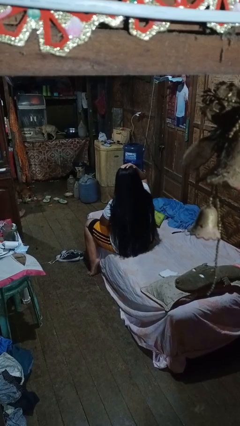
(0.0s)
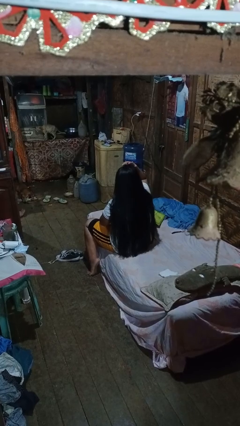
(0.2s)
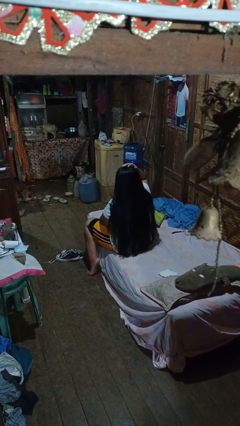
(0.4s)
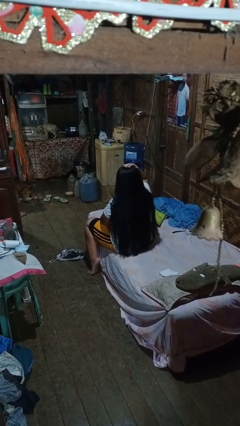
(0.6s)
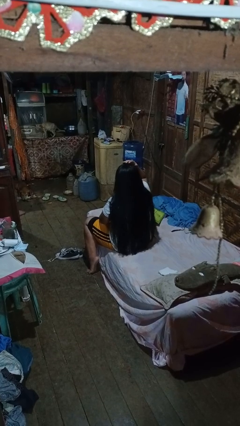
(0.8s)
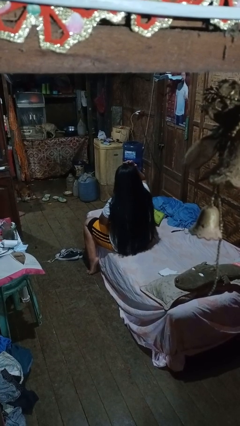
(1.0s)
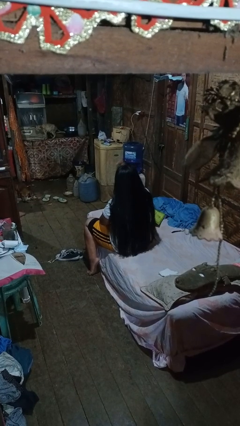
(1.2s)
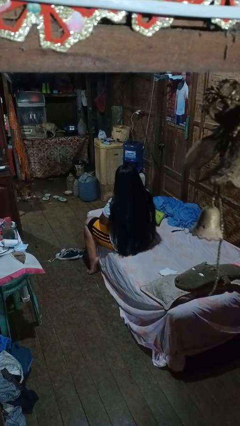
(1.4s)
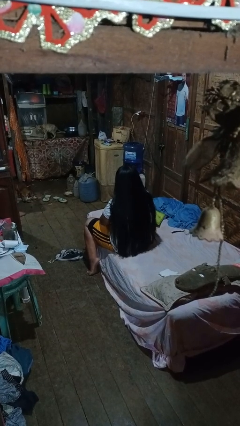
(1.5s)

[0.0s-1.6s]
person pats head

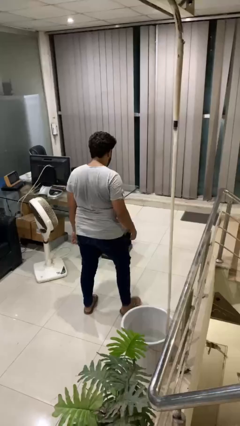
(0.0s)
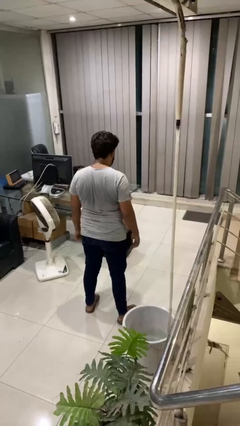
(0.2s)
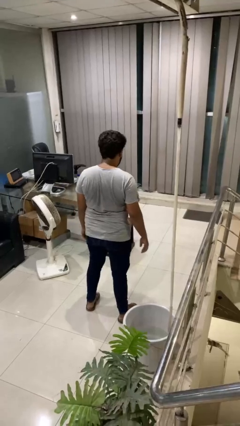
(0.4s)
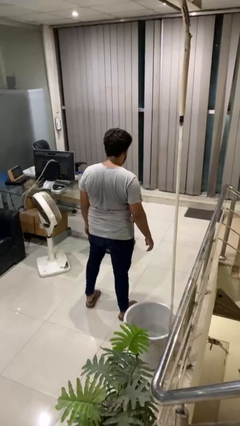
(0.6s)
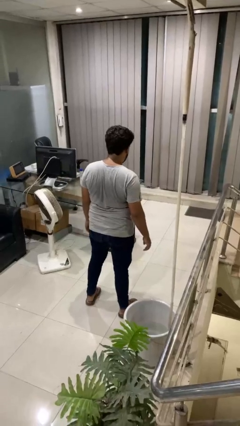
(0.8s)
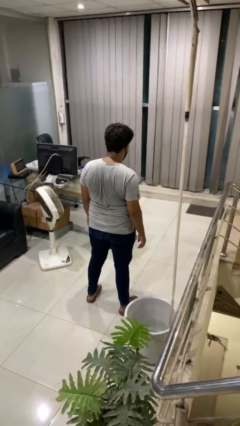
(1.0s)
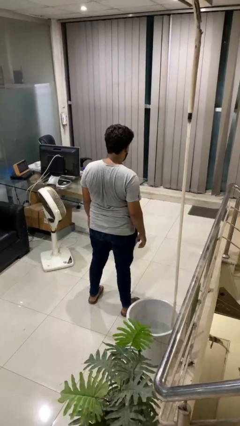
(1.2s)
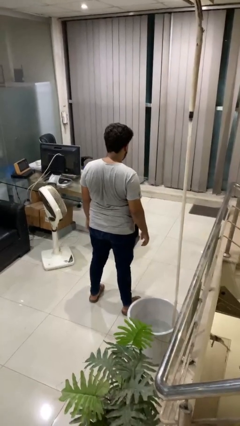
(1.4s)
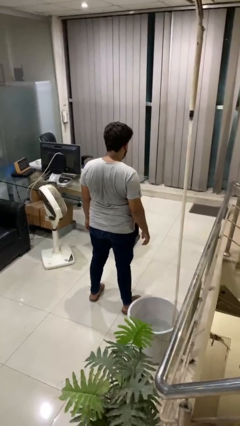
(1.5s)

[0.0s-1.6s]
person bumps into table

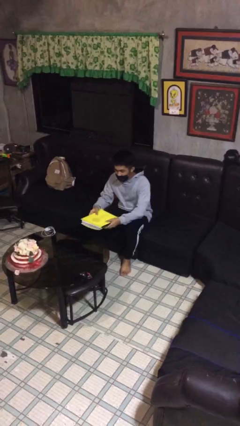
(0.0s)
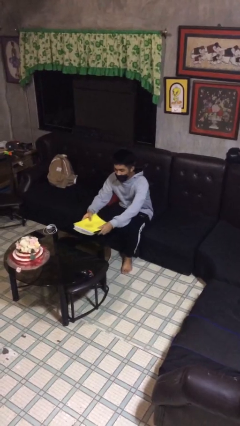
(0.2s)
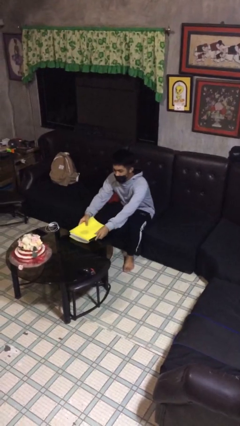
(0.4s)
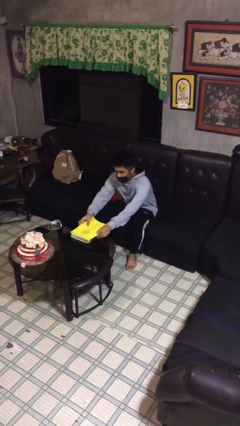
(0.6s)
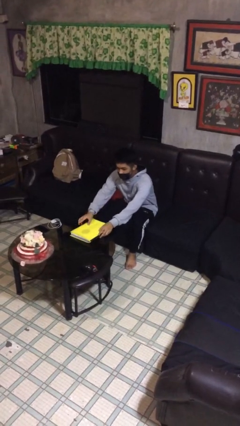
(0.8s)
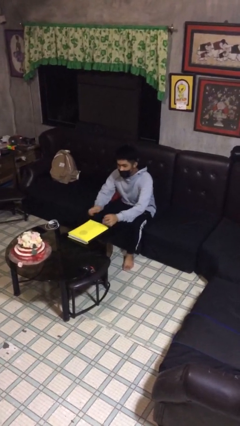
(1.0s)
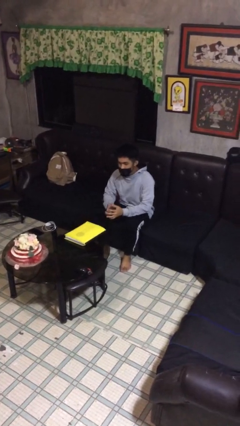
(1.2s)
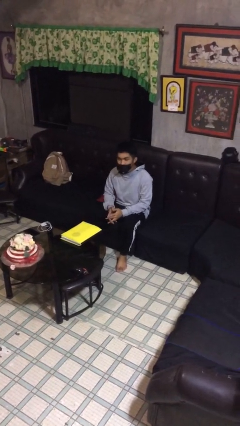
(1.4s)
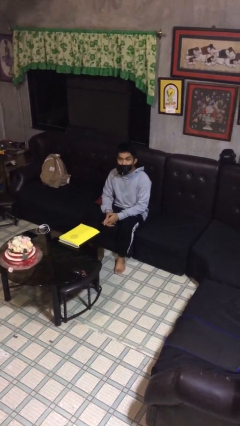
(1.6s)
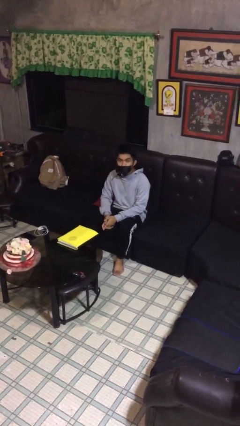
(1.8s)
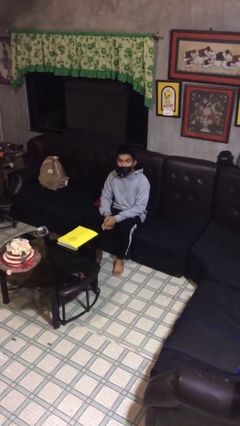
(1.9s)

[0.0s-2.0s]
person puts down object on table

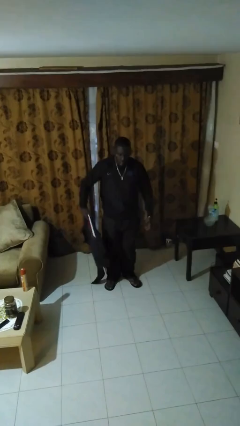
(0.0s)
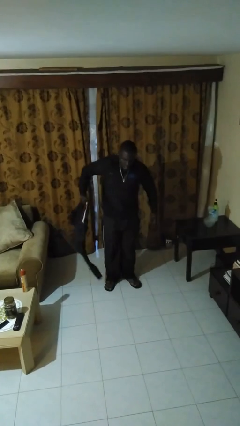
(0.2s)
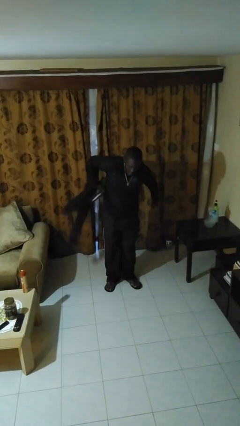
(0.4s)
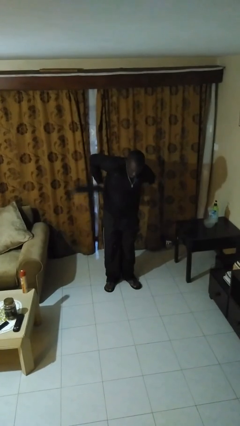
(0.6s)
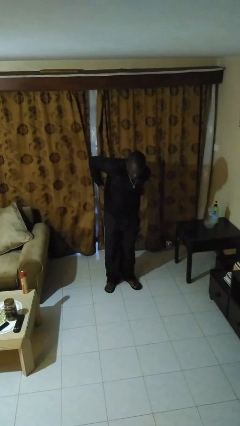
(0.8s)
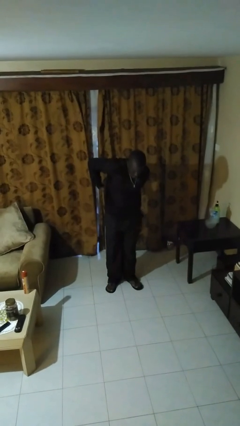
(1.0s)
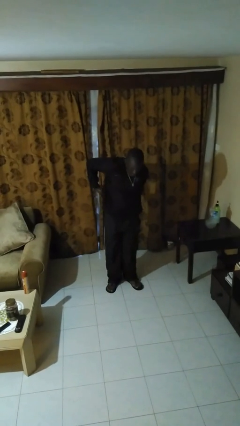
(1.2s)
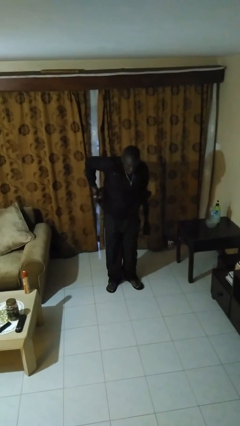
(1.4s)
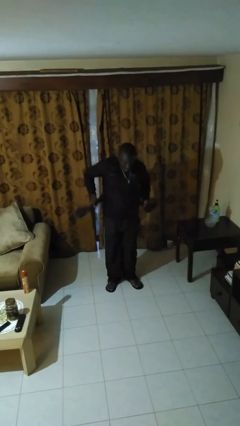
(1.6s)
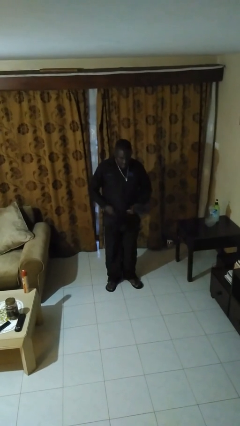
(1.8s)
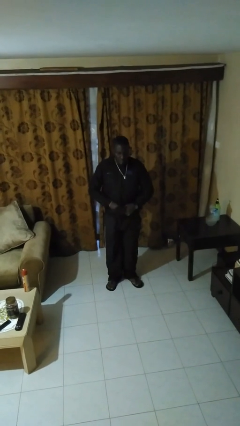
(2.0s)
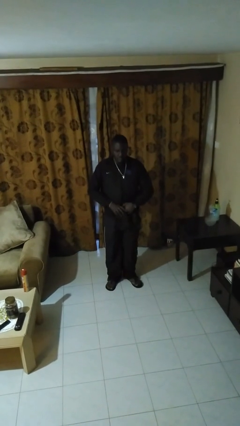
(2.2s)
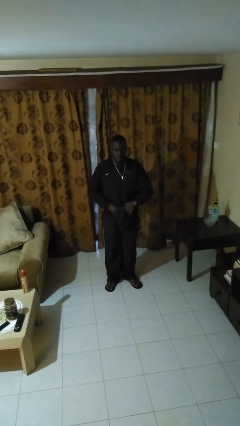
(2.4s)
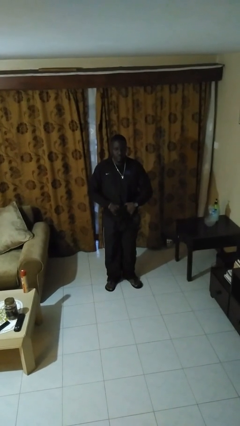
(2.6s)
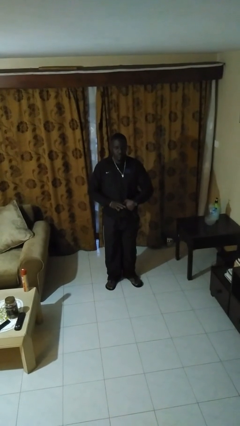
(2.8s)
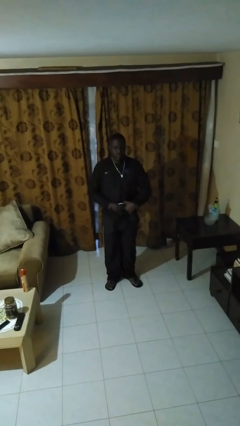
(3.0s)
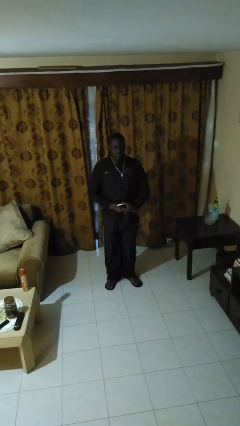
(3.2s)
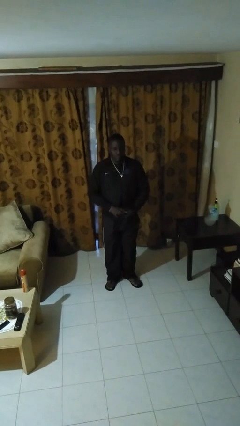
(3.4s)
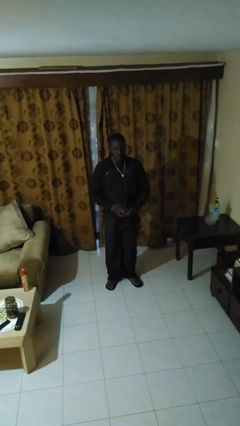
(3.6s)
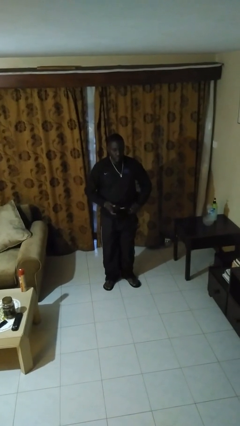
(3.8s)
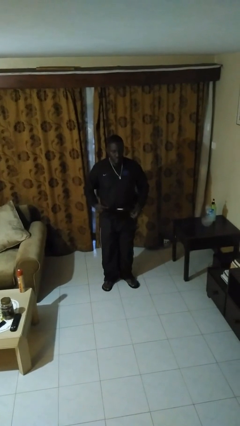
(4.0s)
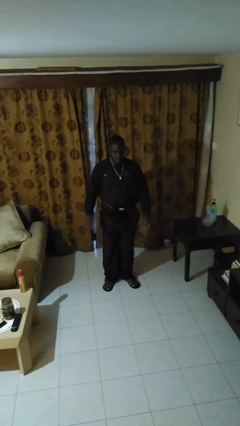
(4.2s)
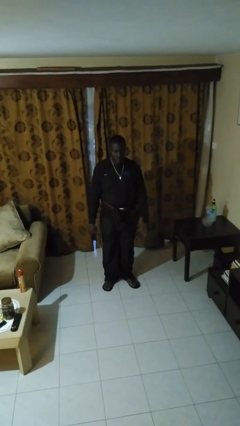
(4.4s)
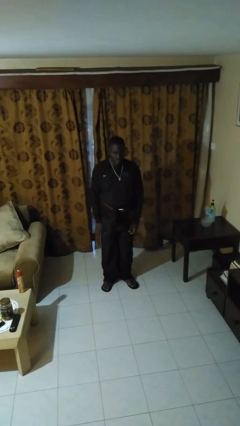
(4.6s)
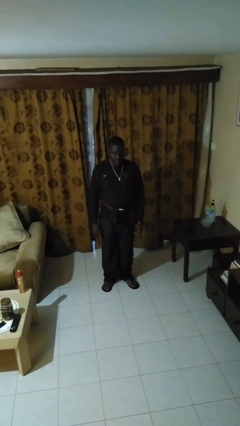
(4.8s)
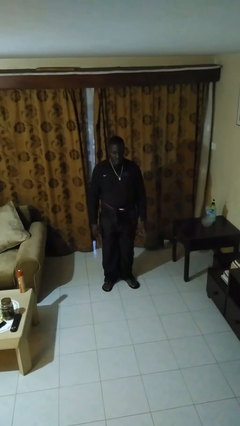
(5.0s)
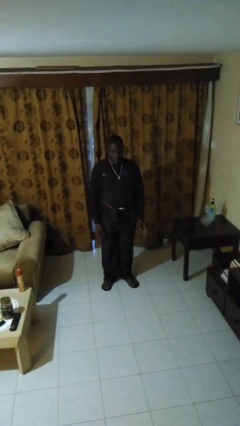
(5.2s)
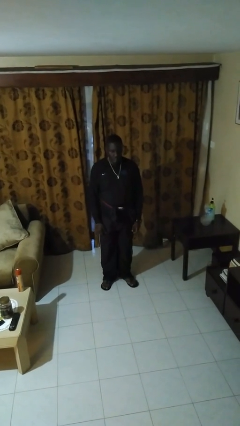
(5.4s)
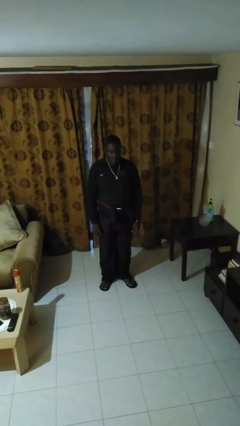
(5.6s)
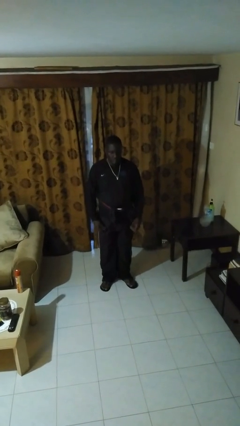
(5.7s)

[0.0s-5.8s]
person ties jacket around waist

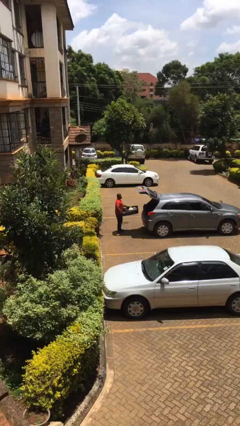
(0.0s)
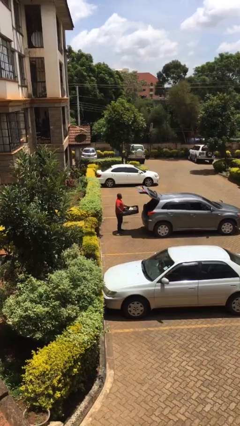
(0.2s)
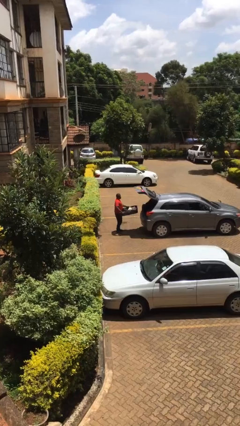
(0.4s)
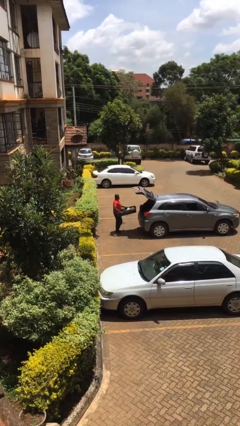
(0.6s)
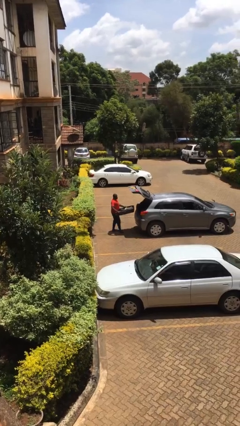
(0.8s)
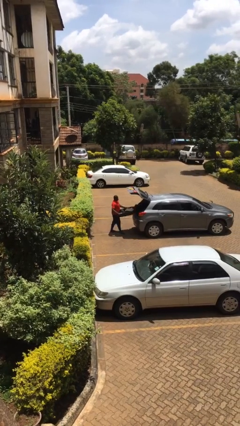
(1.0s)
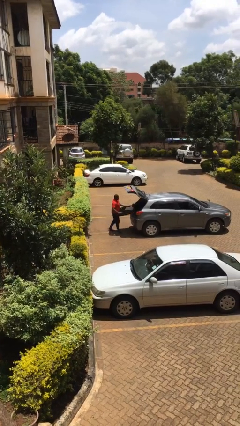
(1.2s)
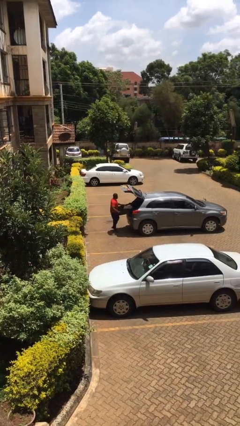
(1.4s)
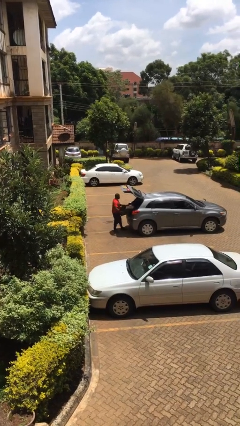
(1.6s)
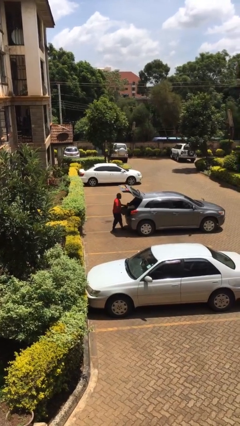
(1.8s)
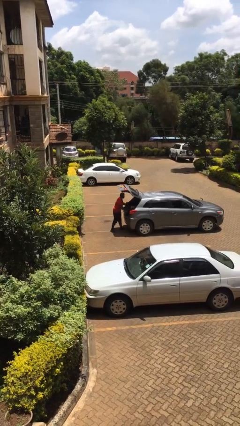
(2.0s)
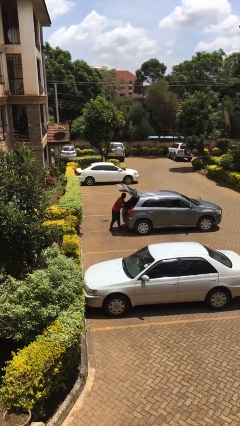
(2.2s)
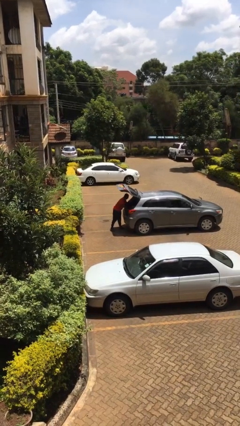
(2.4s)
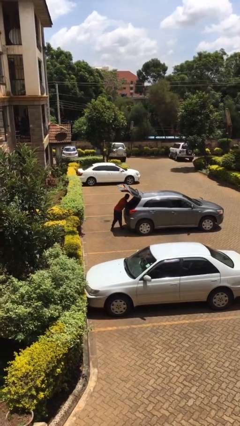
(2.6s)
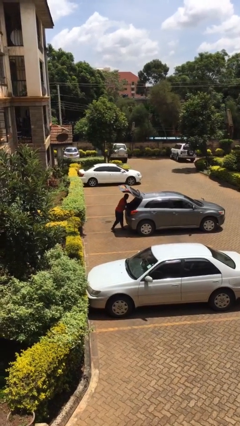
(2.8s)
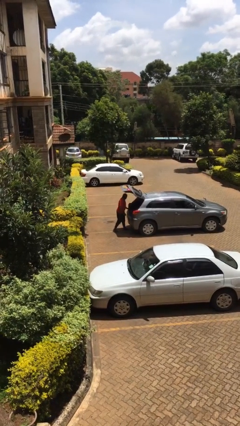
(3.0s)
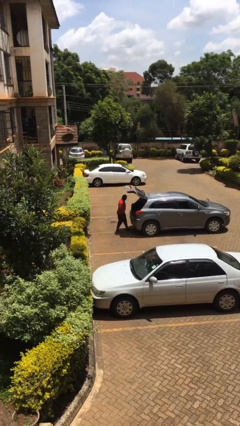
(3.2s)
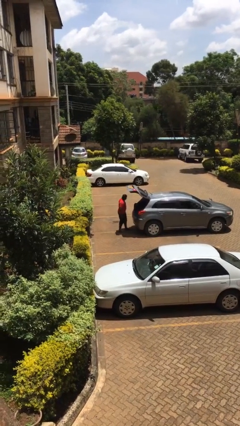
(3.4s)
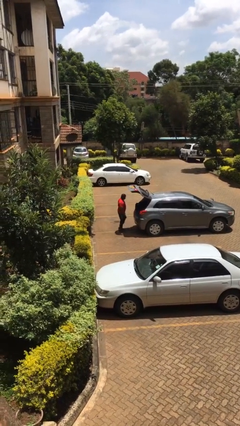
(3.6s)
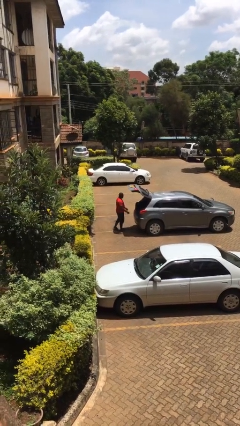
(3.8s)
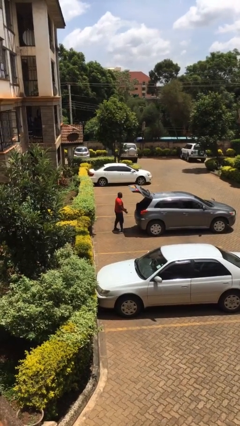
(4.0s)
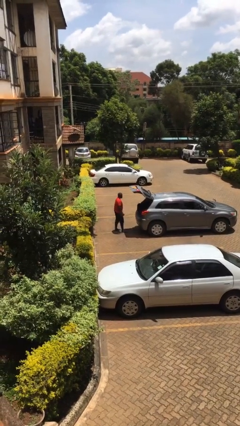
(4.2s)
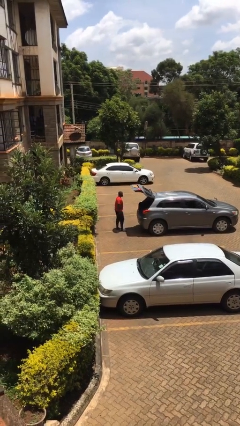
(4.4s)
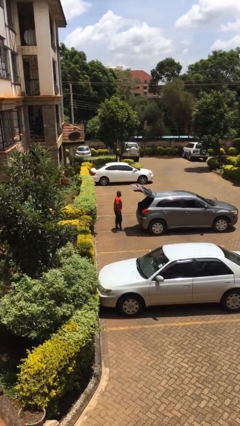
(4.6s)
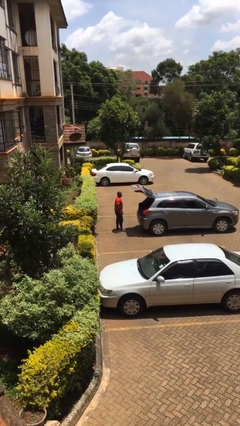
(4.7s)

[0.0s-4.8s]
person loads car

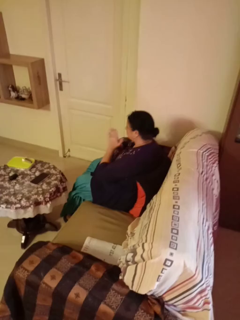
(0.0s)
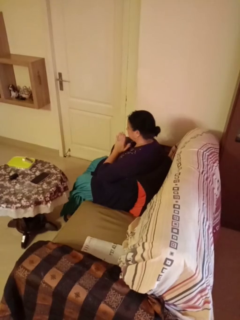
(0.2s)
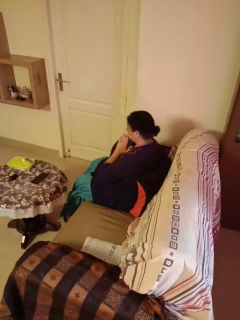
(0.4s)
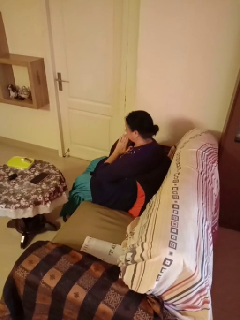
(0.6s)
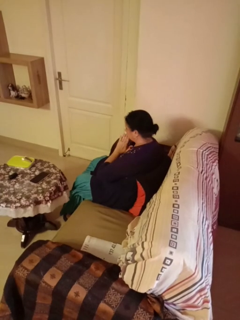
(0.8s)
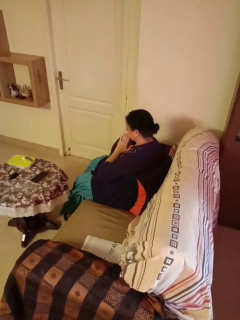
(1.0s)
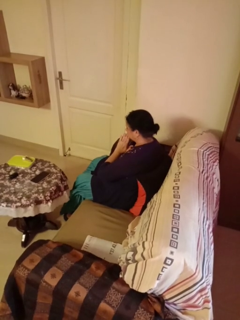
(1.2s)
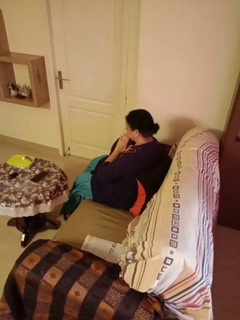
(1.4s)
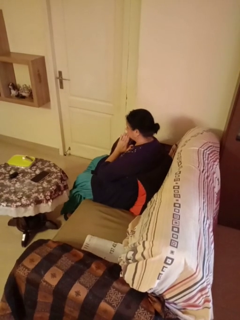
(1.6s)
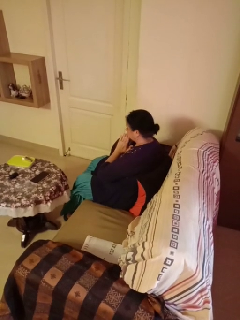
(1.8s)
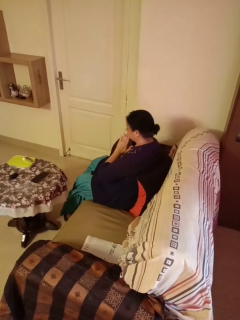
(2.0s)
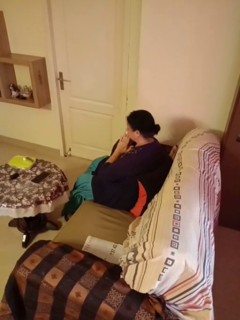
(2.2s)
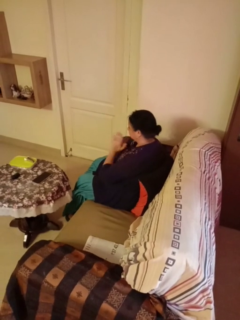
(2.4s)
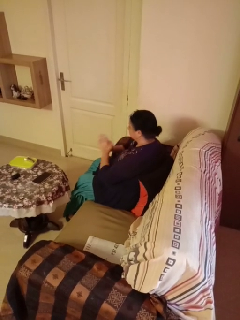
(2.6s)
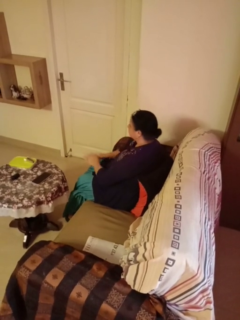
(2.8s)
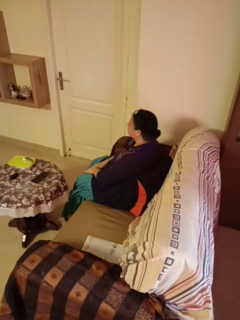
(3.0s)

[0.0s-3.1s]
person prays
